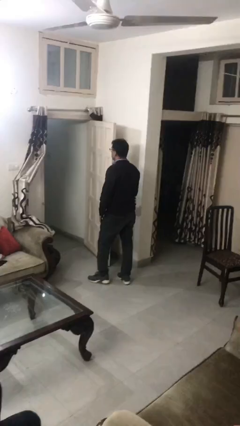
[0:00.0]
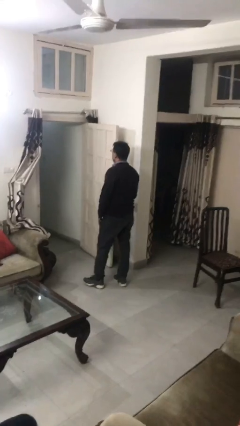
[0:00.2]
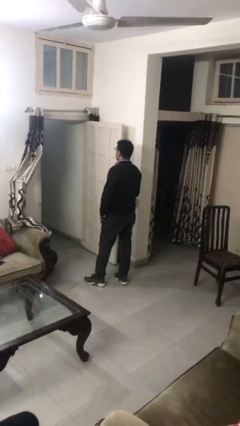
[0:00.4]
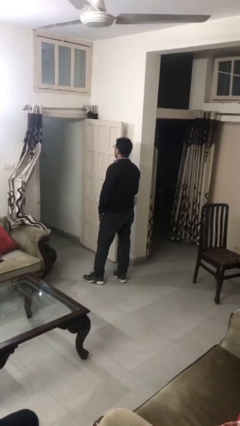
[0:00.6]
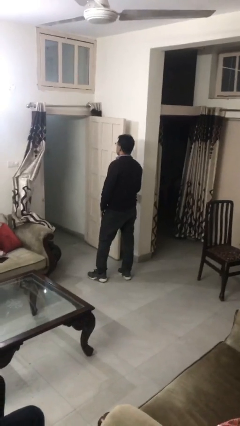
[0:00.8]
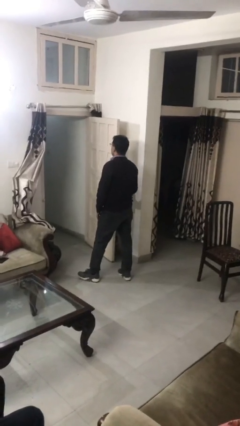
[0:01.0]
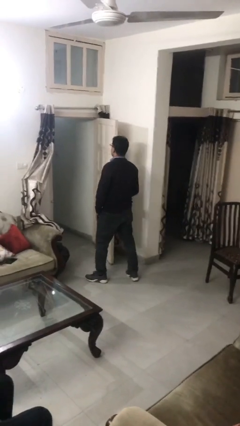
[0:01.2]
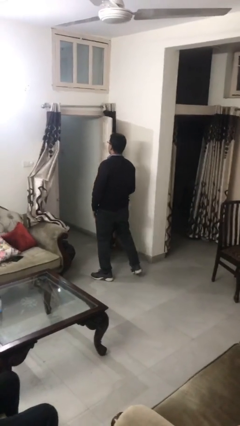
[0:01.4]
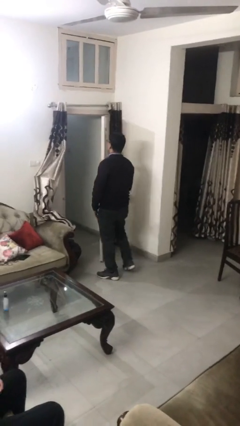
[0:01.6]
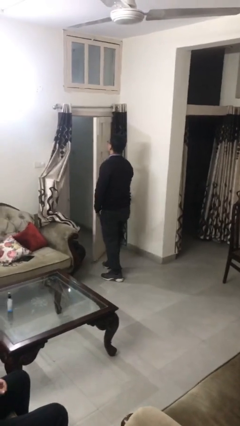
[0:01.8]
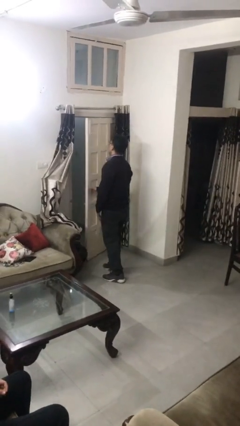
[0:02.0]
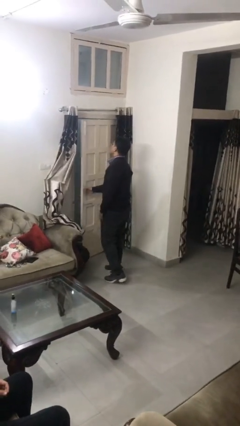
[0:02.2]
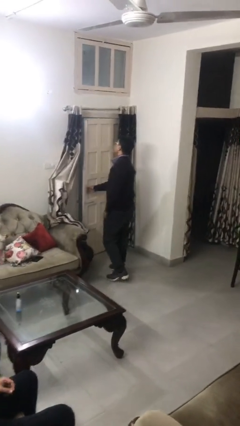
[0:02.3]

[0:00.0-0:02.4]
person closes facility door

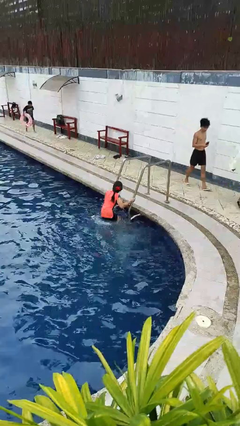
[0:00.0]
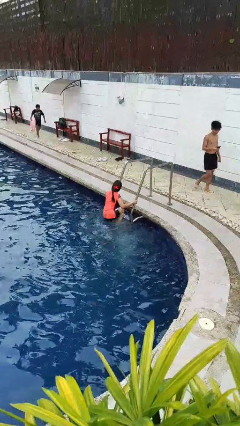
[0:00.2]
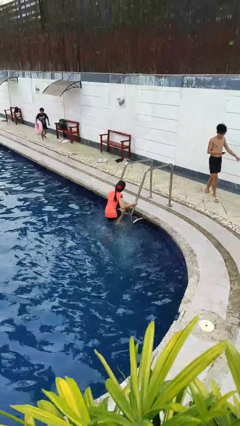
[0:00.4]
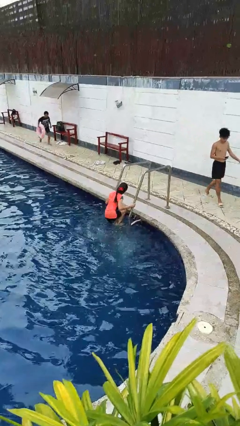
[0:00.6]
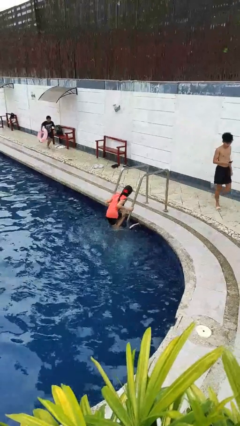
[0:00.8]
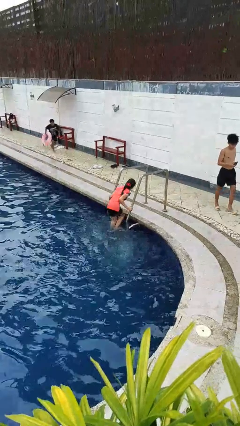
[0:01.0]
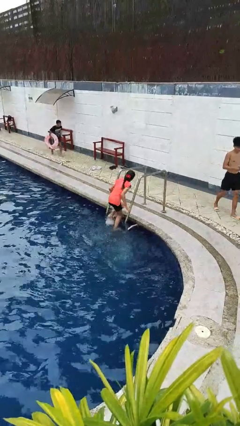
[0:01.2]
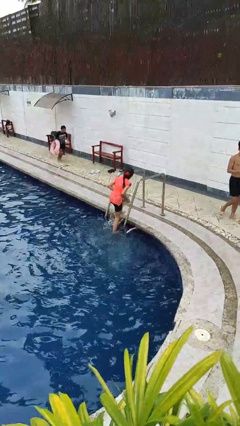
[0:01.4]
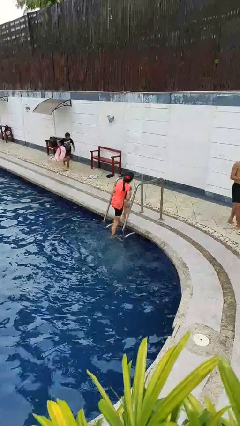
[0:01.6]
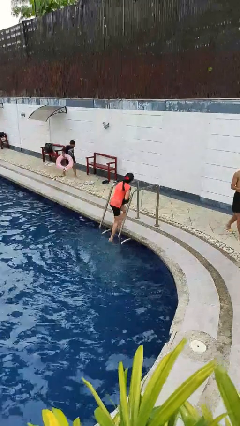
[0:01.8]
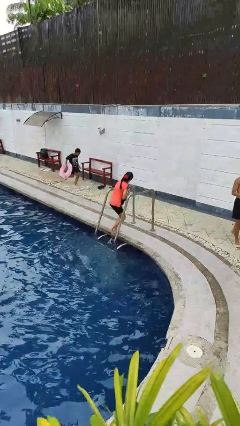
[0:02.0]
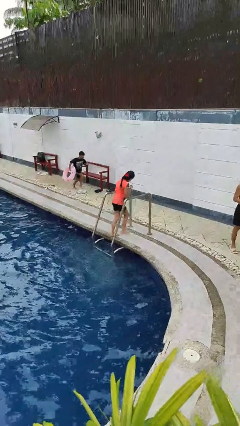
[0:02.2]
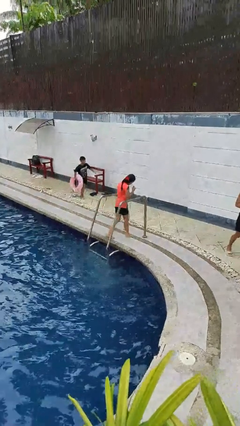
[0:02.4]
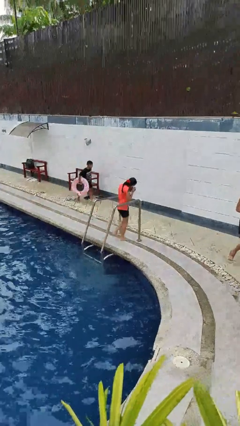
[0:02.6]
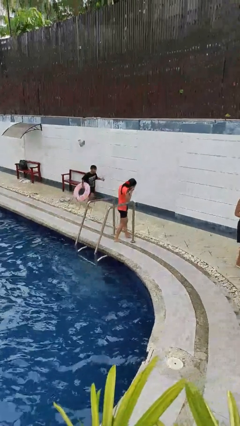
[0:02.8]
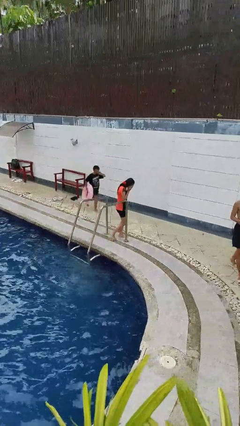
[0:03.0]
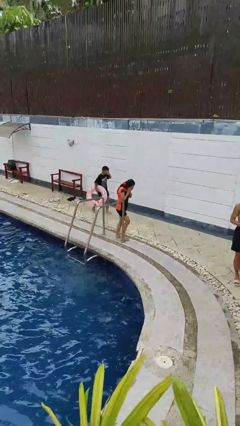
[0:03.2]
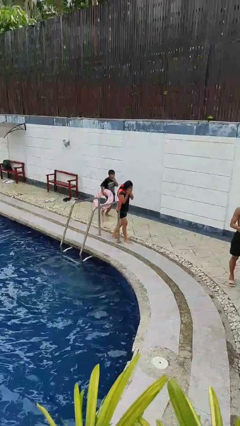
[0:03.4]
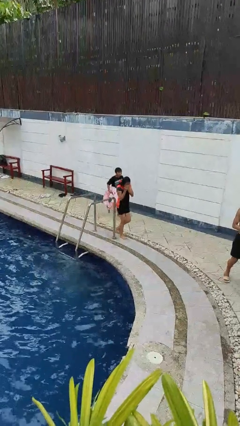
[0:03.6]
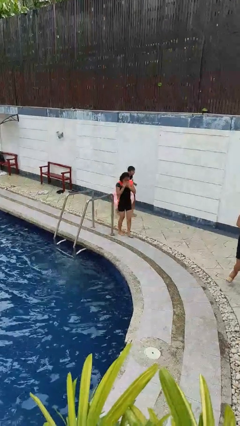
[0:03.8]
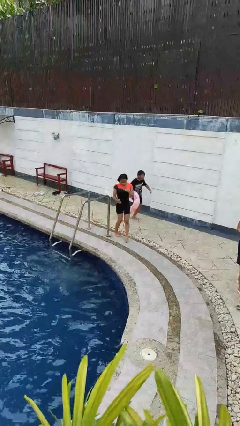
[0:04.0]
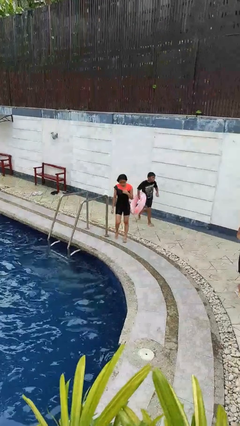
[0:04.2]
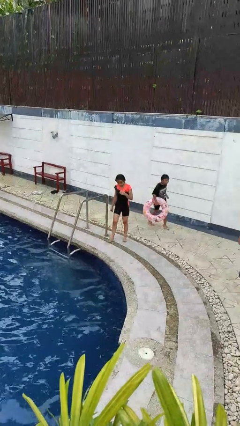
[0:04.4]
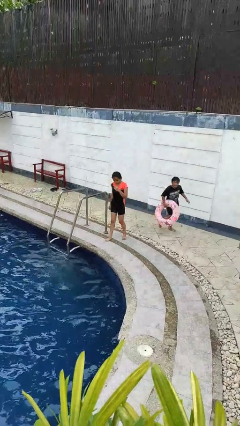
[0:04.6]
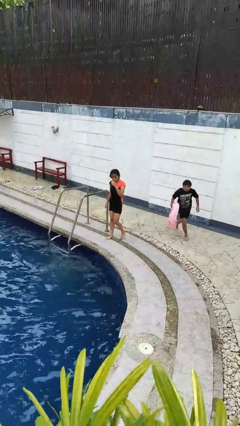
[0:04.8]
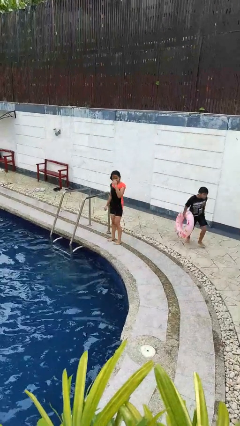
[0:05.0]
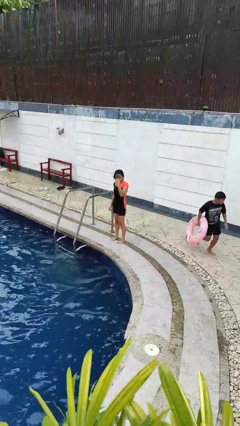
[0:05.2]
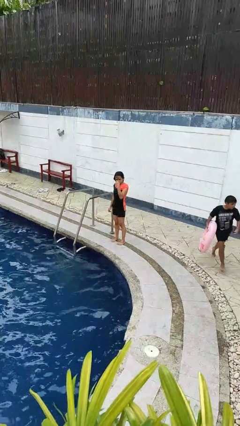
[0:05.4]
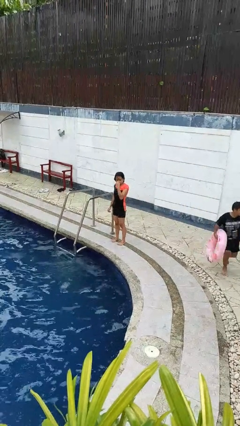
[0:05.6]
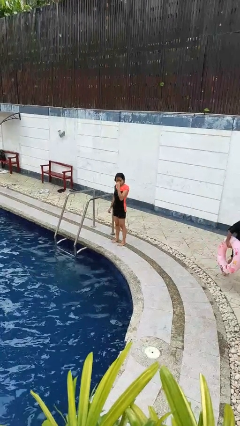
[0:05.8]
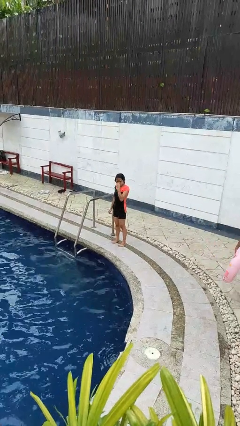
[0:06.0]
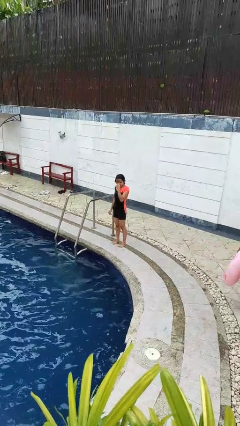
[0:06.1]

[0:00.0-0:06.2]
person exits pool

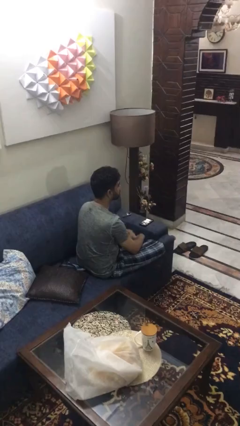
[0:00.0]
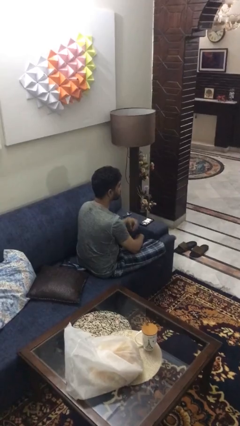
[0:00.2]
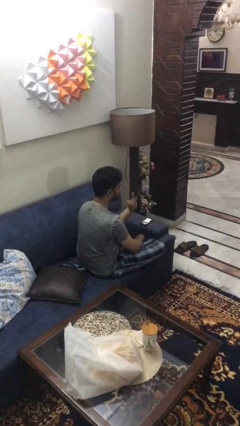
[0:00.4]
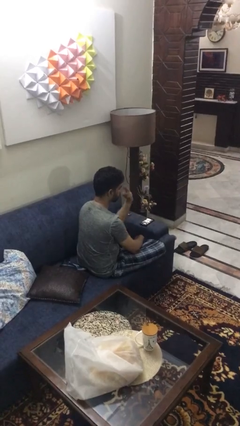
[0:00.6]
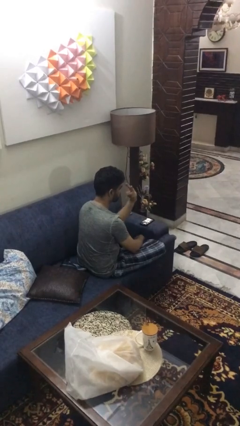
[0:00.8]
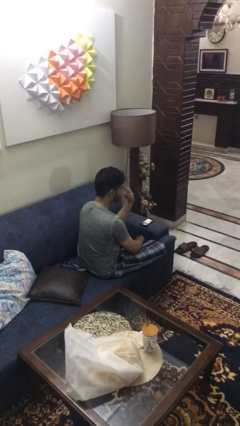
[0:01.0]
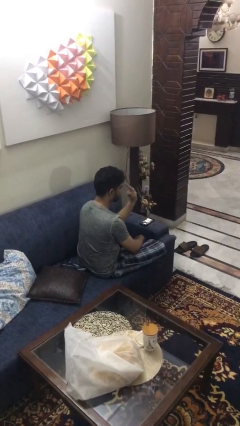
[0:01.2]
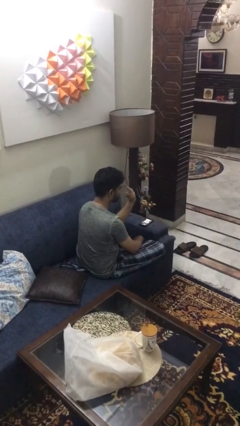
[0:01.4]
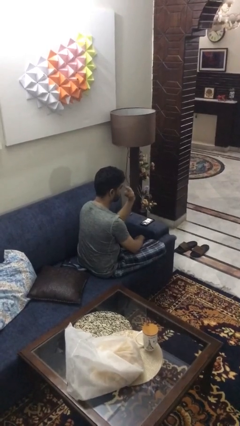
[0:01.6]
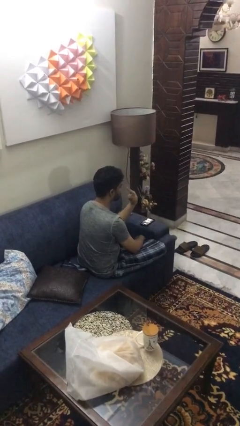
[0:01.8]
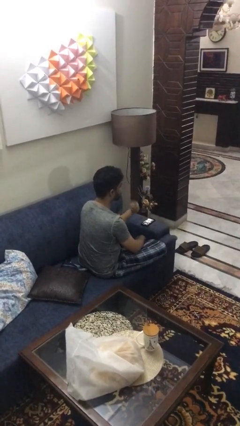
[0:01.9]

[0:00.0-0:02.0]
person gestures watch closely

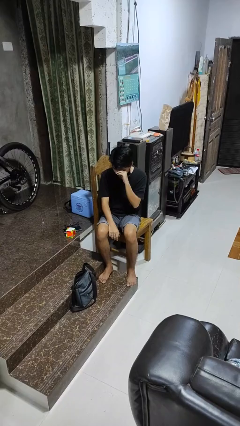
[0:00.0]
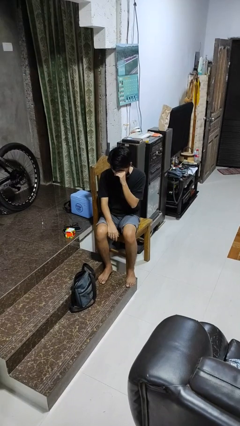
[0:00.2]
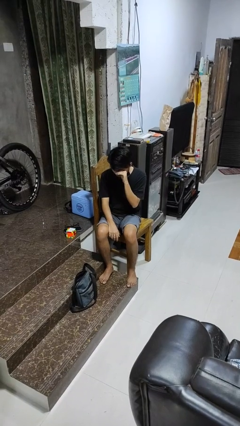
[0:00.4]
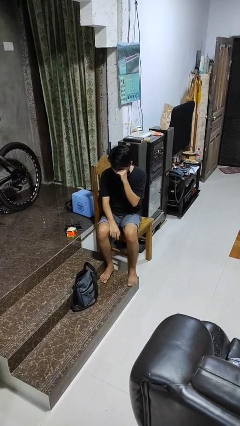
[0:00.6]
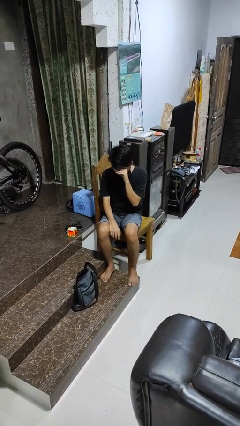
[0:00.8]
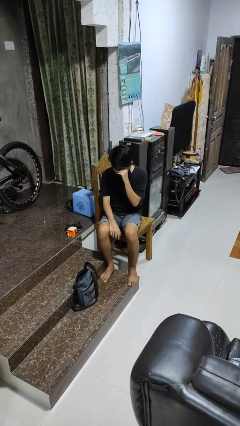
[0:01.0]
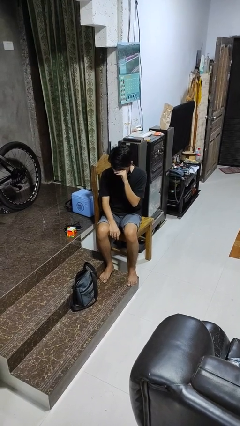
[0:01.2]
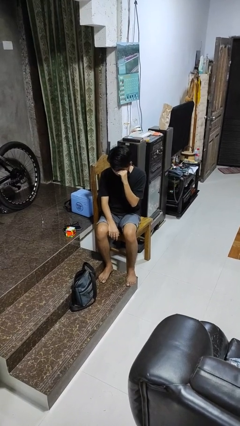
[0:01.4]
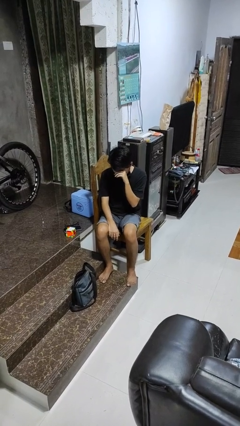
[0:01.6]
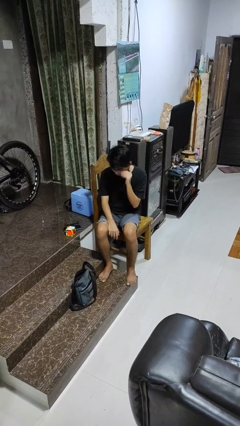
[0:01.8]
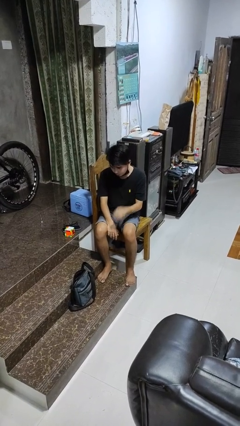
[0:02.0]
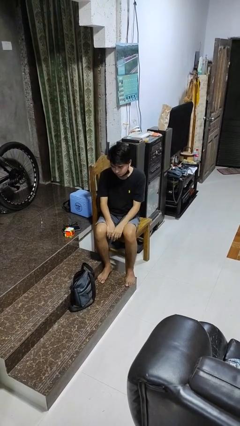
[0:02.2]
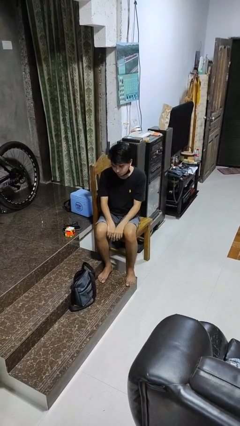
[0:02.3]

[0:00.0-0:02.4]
person rubs eyes

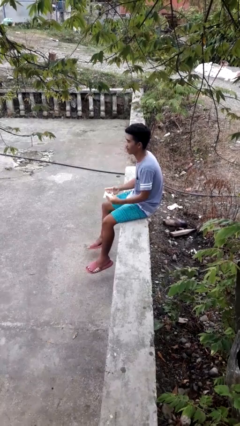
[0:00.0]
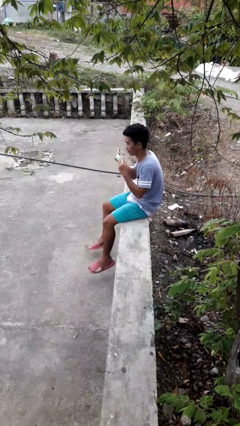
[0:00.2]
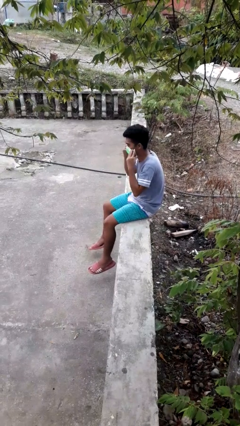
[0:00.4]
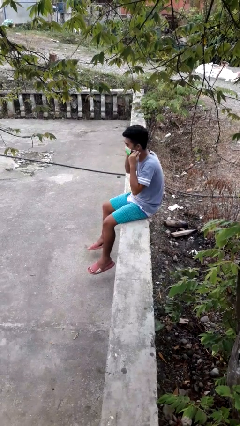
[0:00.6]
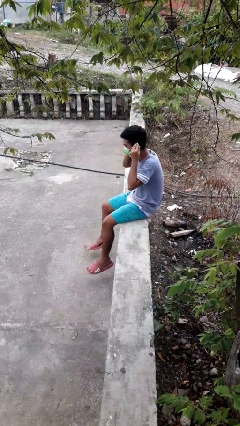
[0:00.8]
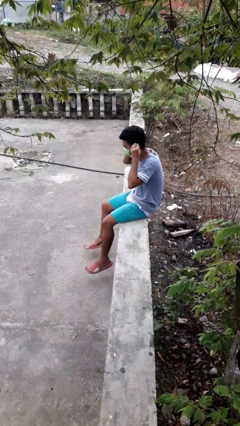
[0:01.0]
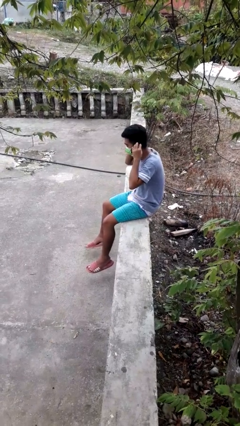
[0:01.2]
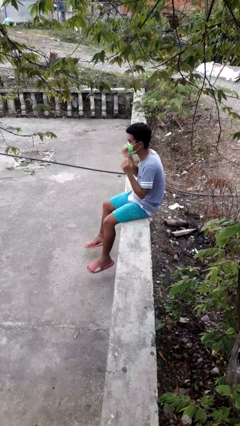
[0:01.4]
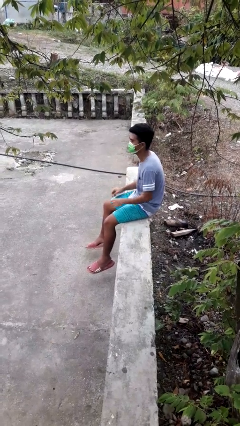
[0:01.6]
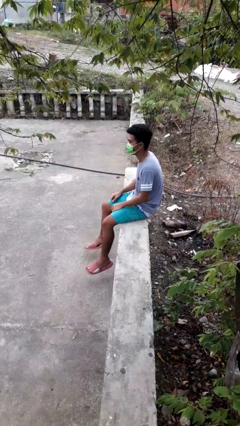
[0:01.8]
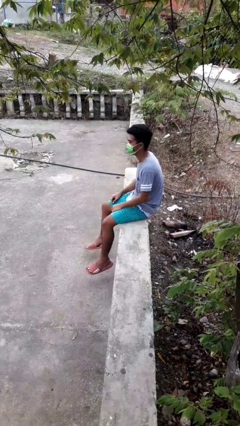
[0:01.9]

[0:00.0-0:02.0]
person puts on facemask

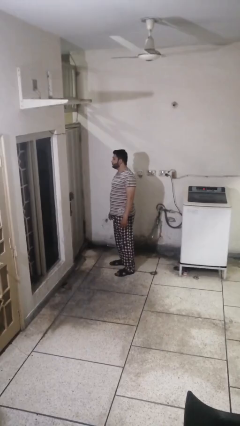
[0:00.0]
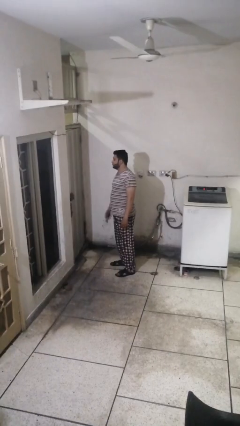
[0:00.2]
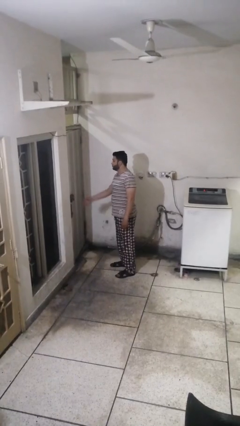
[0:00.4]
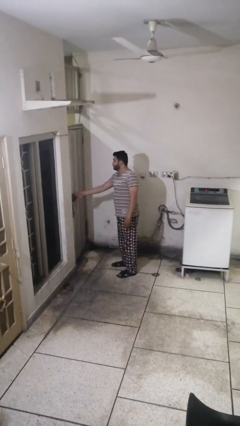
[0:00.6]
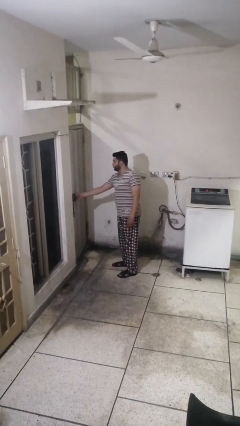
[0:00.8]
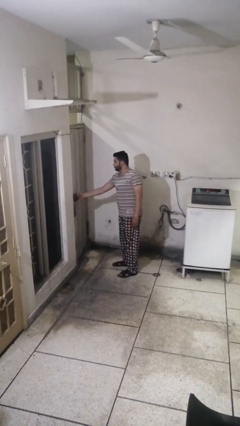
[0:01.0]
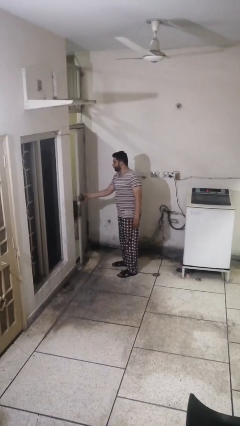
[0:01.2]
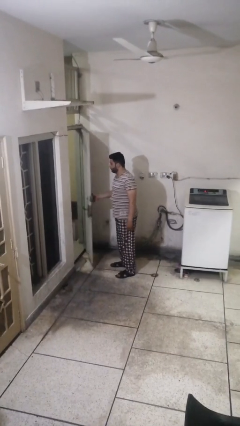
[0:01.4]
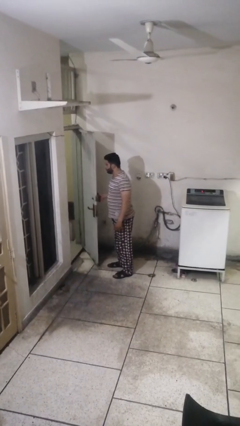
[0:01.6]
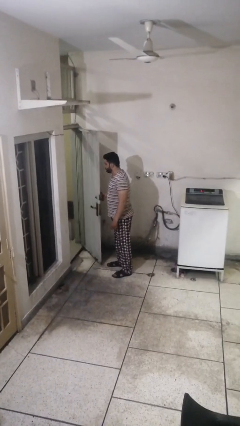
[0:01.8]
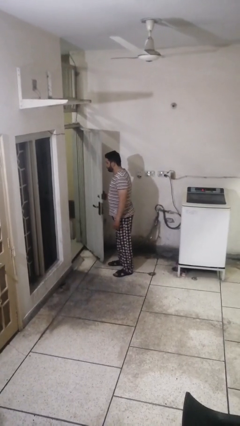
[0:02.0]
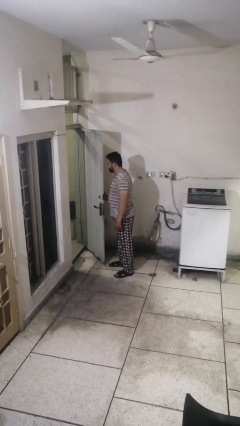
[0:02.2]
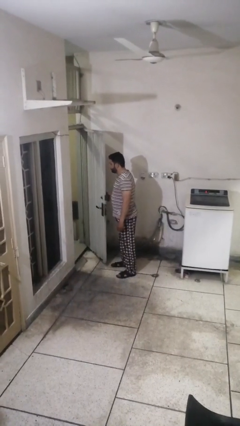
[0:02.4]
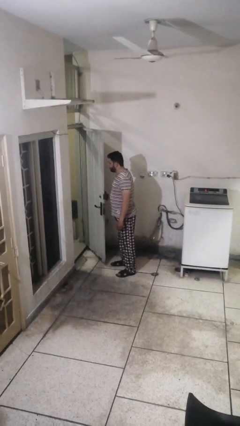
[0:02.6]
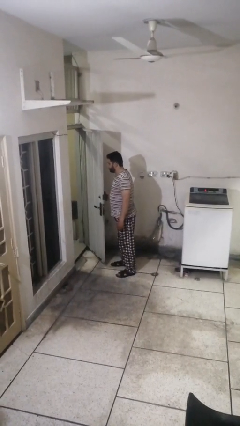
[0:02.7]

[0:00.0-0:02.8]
person opens facility door
